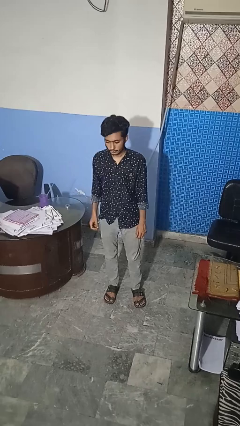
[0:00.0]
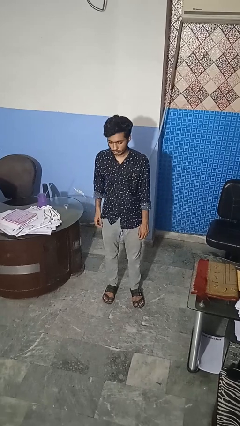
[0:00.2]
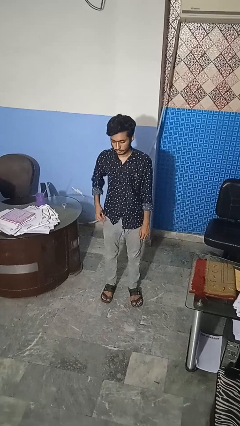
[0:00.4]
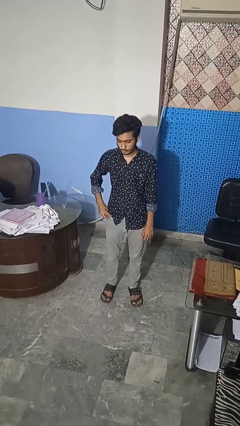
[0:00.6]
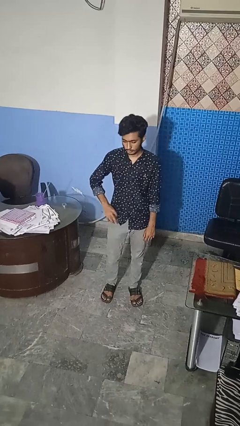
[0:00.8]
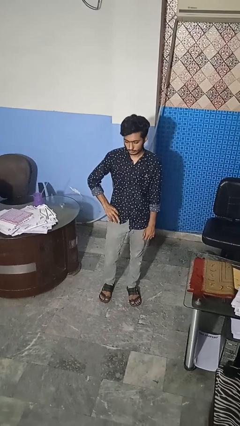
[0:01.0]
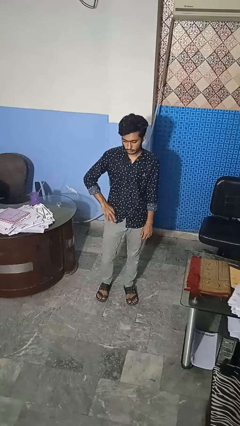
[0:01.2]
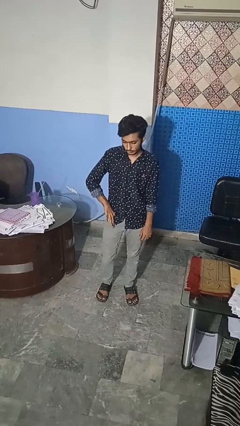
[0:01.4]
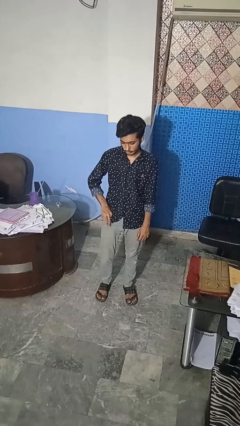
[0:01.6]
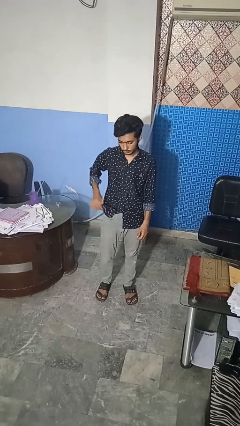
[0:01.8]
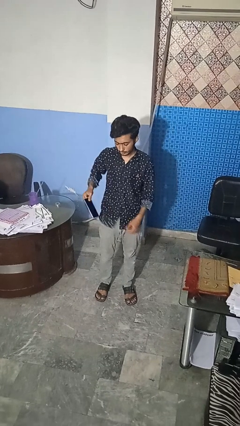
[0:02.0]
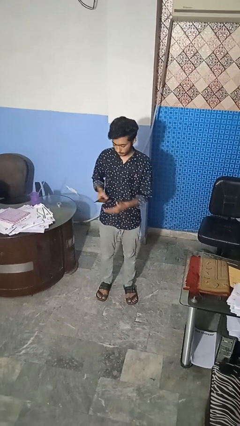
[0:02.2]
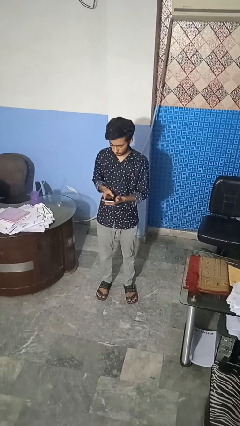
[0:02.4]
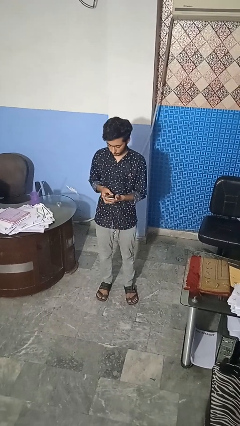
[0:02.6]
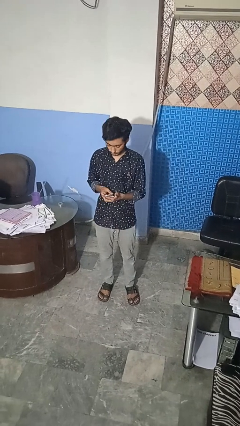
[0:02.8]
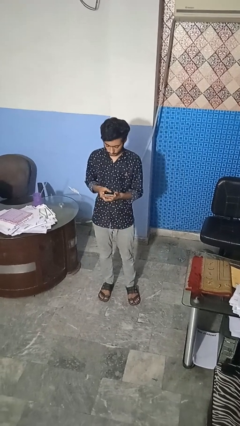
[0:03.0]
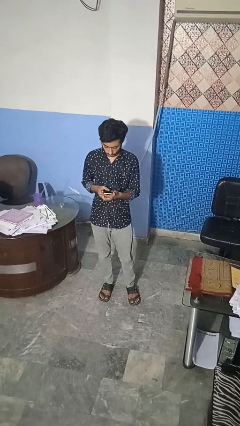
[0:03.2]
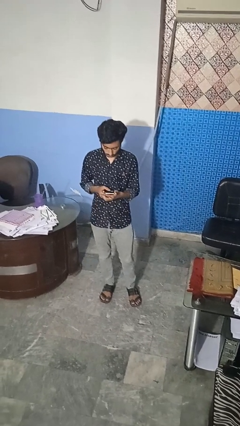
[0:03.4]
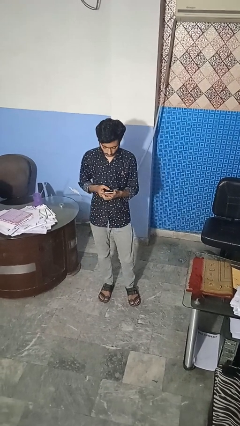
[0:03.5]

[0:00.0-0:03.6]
person takes phone from pocket

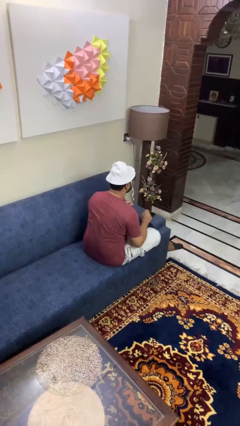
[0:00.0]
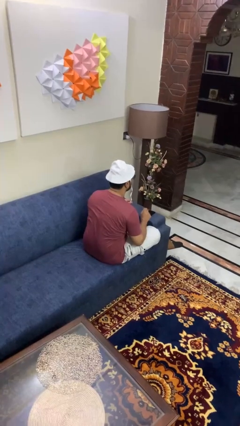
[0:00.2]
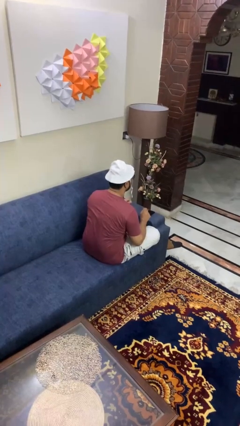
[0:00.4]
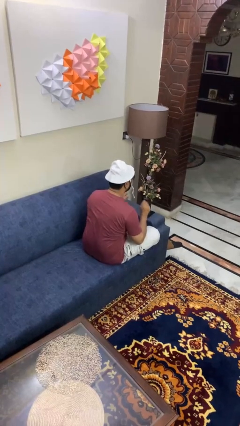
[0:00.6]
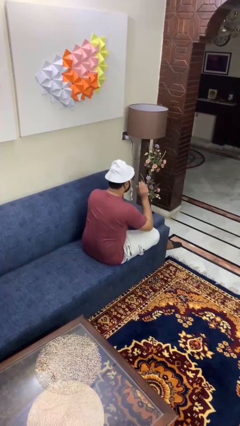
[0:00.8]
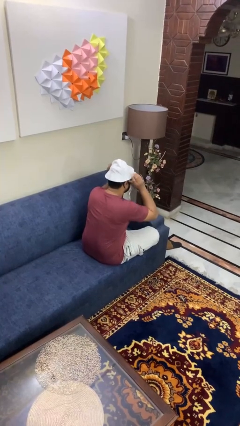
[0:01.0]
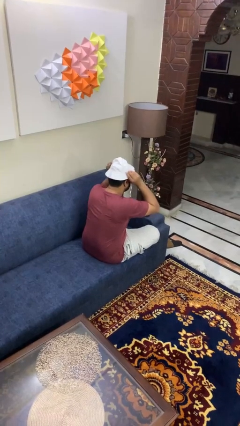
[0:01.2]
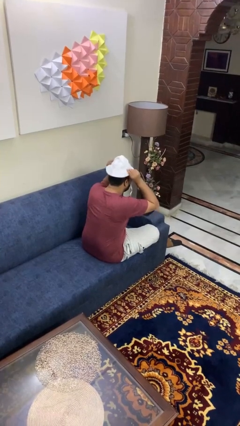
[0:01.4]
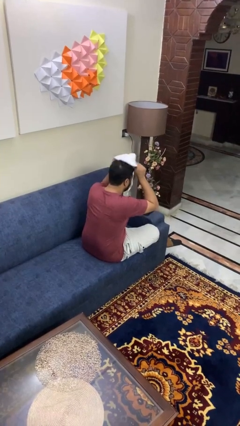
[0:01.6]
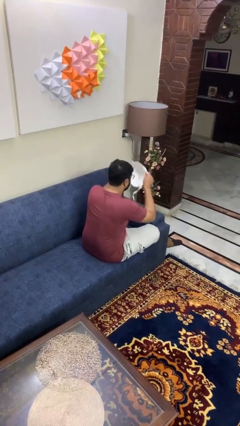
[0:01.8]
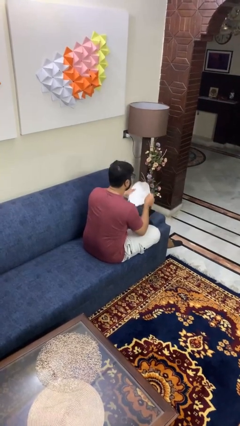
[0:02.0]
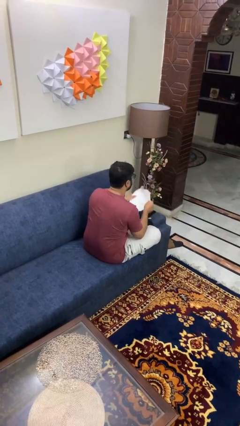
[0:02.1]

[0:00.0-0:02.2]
person takes off hat

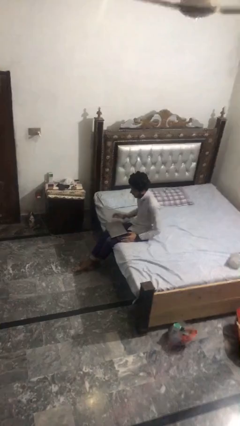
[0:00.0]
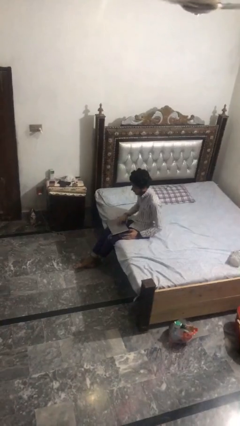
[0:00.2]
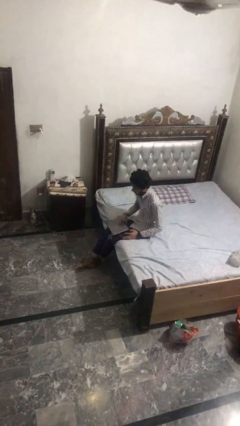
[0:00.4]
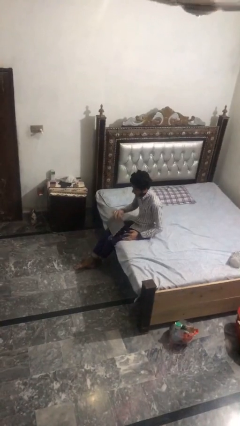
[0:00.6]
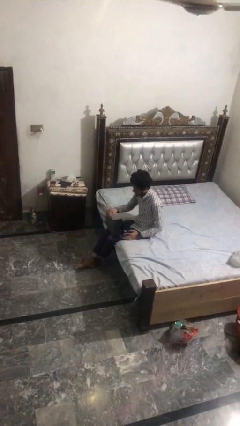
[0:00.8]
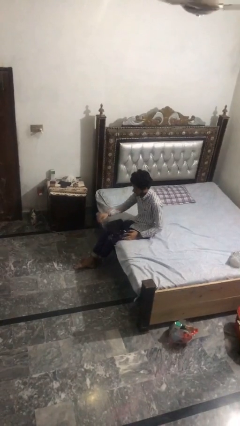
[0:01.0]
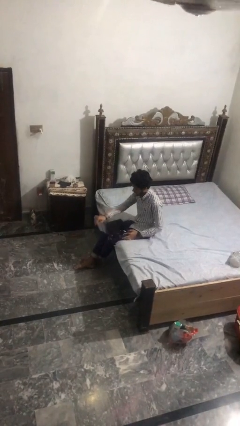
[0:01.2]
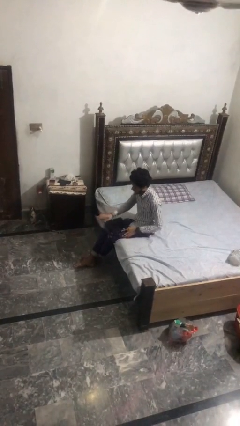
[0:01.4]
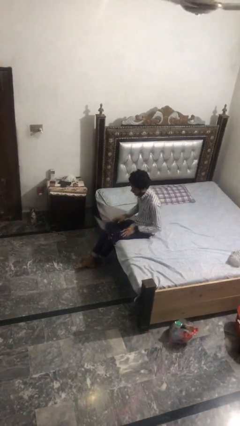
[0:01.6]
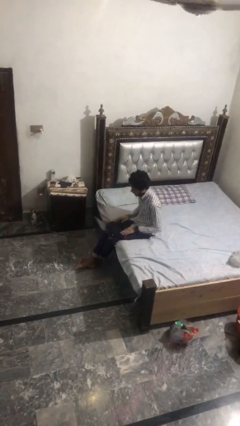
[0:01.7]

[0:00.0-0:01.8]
person opens laptop

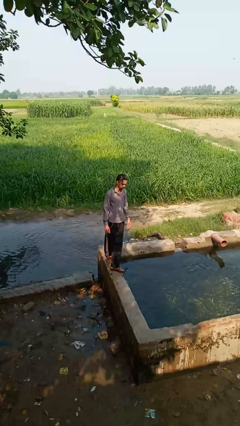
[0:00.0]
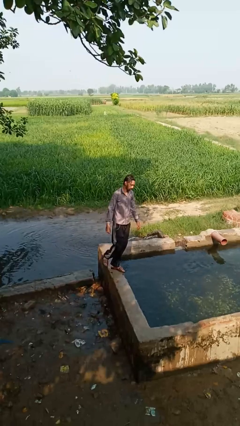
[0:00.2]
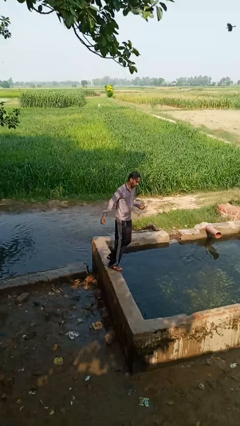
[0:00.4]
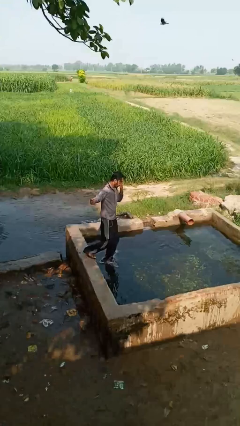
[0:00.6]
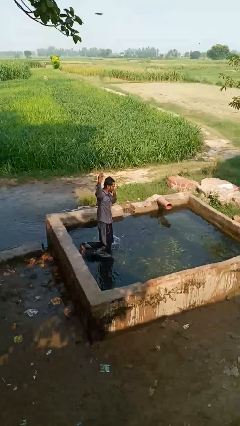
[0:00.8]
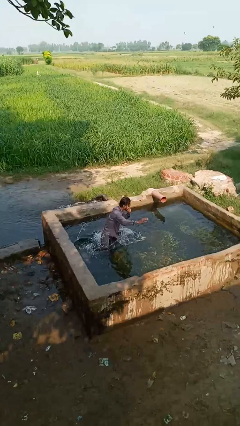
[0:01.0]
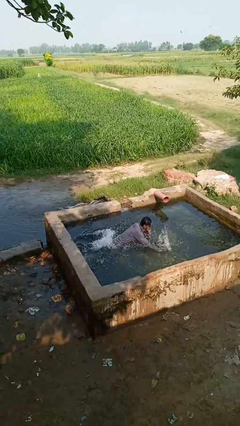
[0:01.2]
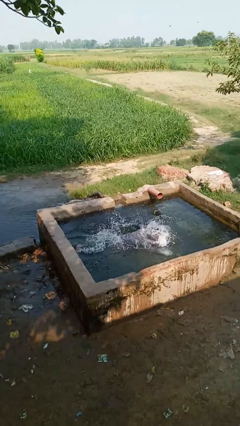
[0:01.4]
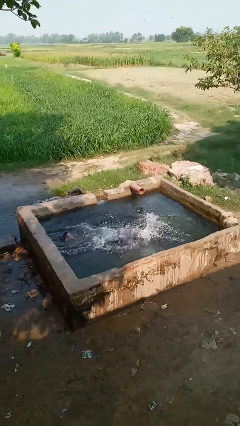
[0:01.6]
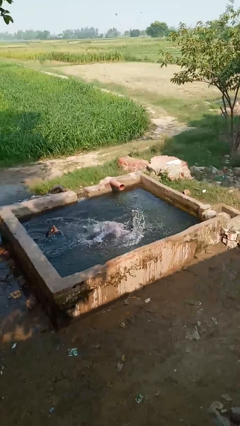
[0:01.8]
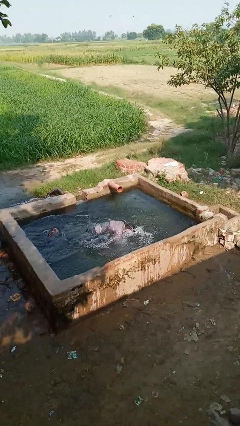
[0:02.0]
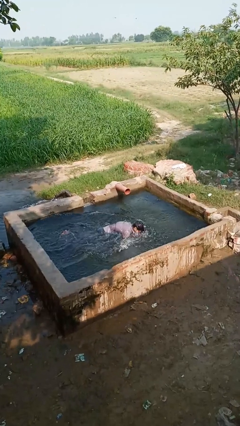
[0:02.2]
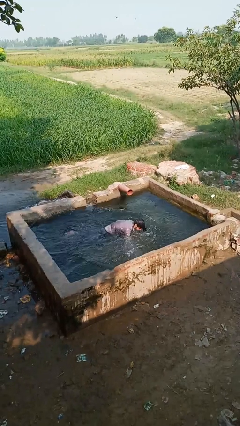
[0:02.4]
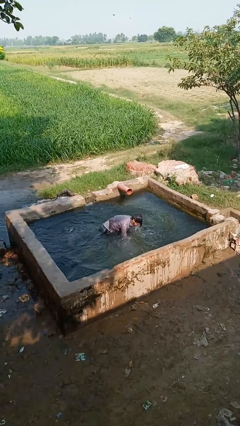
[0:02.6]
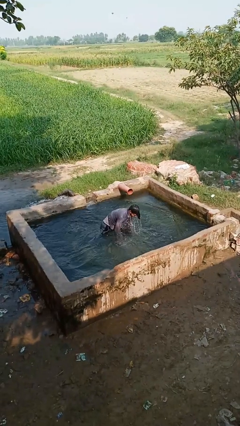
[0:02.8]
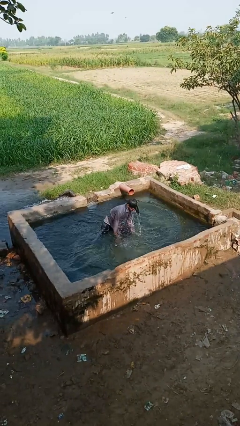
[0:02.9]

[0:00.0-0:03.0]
person falls into pool

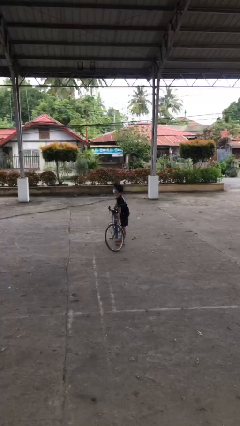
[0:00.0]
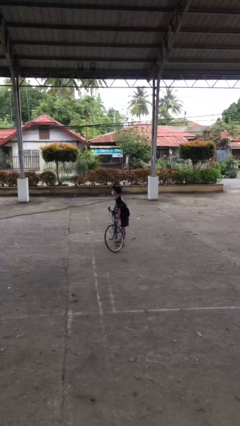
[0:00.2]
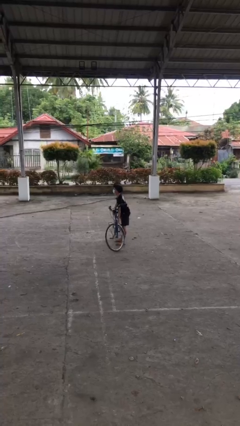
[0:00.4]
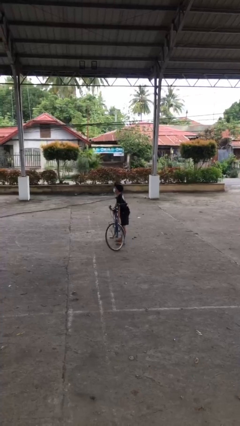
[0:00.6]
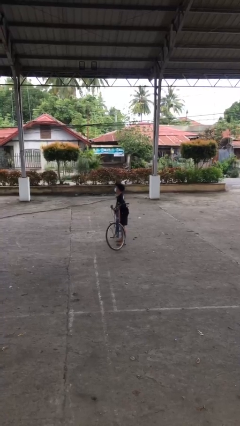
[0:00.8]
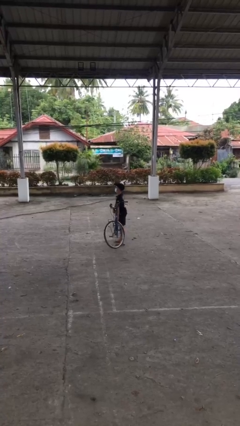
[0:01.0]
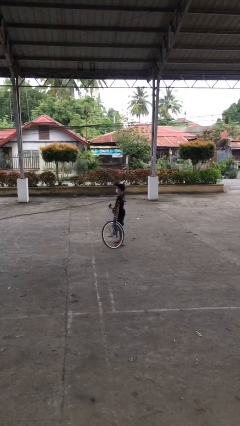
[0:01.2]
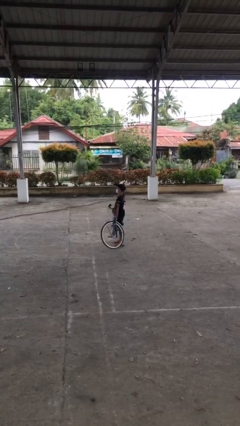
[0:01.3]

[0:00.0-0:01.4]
person picks up object from floor

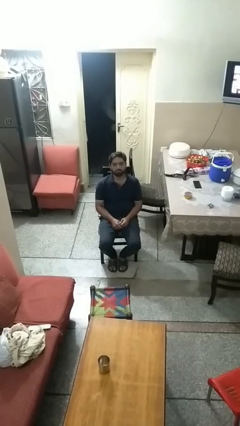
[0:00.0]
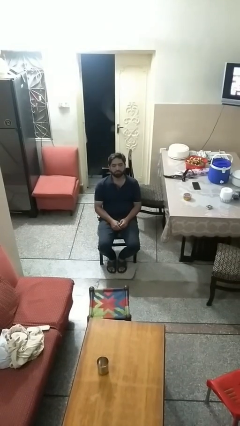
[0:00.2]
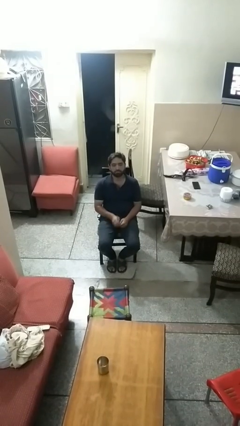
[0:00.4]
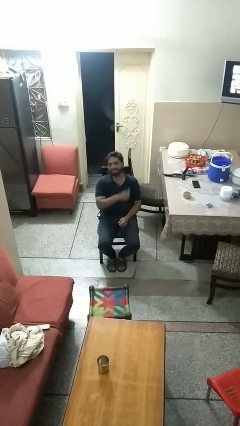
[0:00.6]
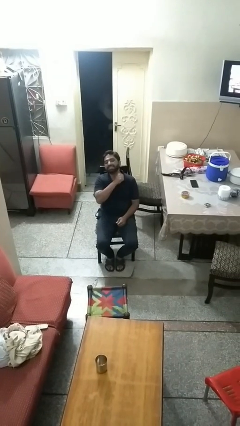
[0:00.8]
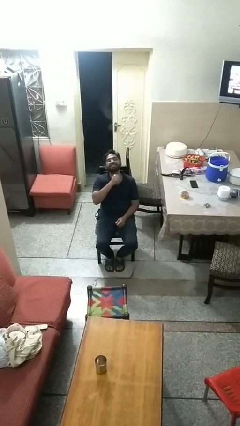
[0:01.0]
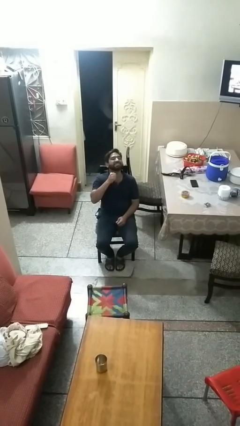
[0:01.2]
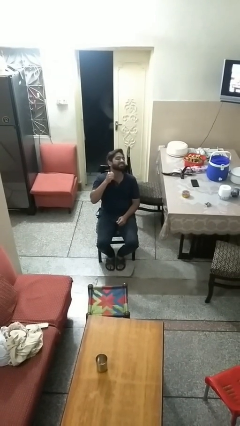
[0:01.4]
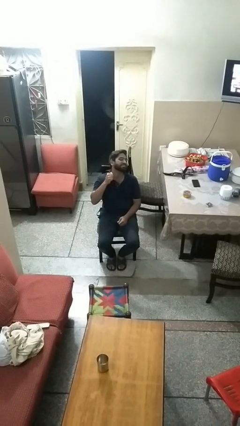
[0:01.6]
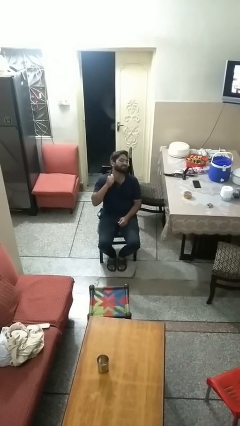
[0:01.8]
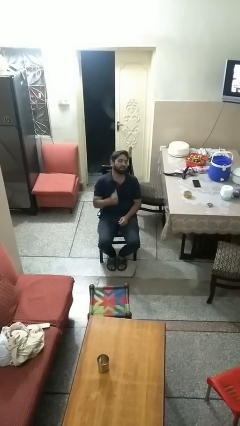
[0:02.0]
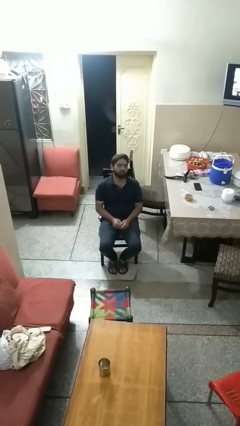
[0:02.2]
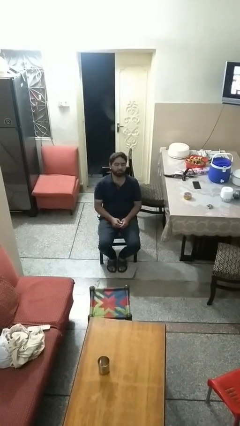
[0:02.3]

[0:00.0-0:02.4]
person gestures cut

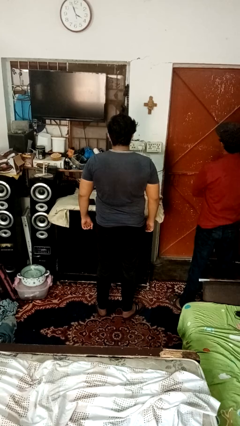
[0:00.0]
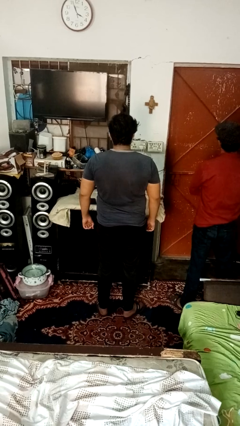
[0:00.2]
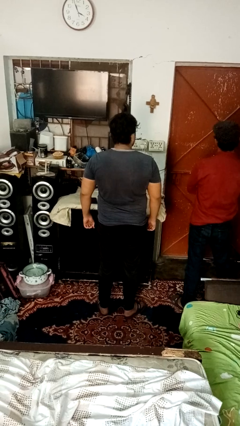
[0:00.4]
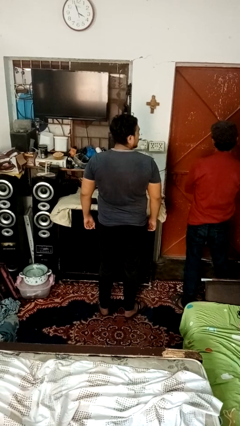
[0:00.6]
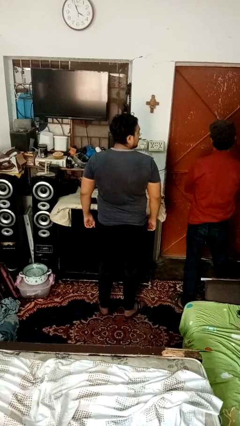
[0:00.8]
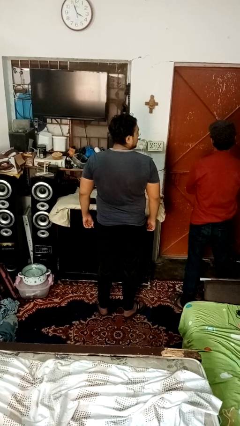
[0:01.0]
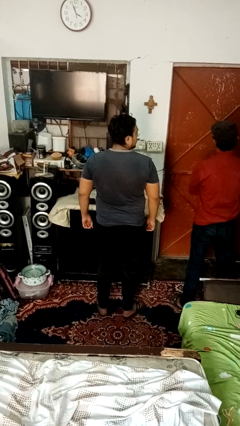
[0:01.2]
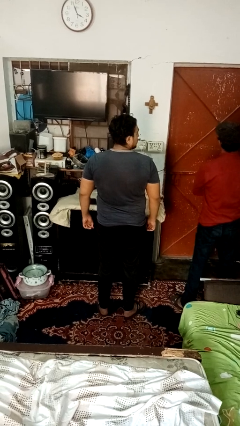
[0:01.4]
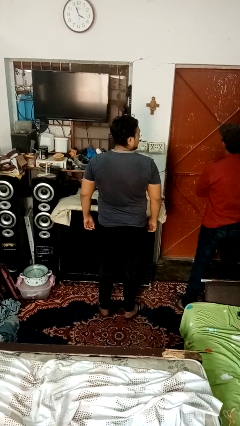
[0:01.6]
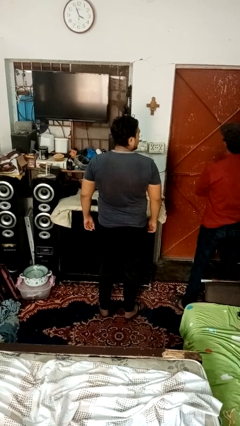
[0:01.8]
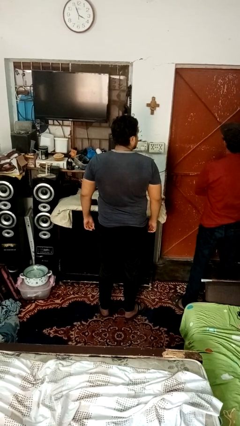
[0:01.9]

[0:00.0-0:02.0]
person looks over shoulder

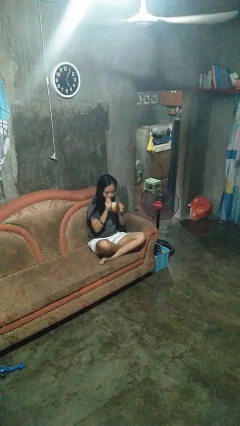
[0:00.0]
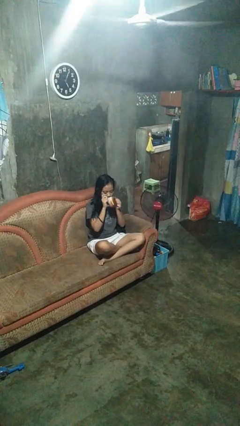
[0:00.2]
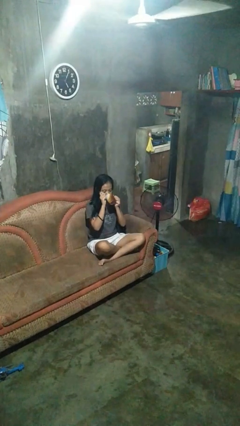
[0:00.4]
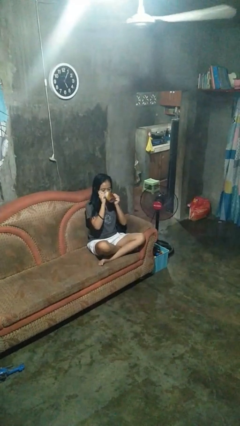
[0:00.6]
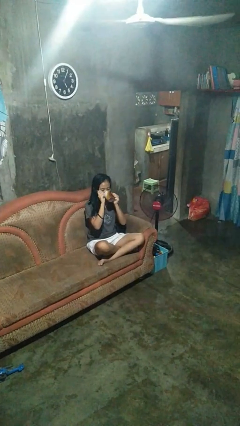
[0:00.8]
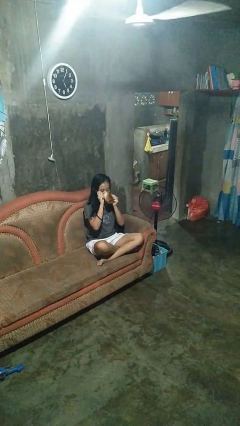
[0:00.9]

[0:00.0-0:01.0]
person drinks from mug
